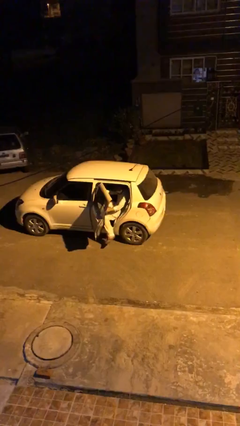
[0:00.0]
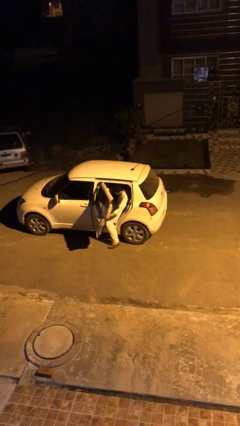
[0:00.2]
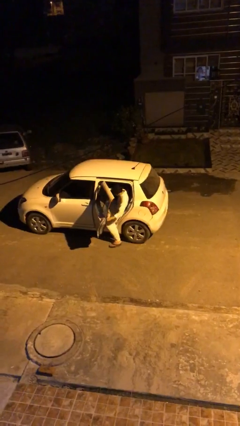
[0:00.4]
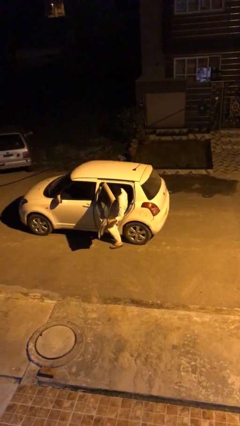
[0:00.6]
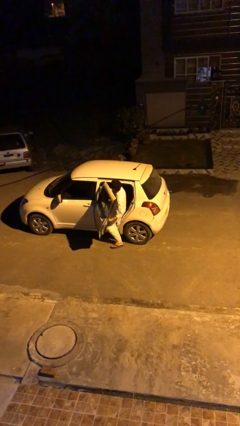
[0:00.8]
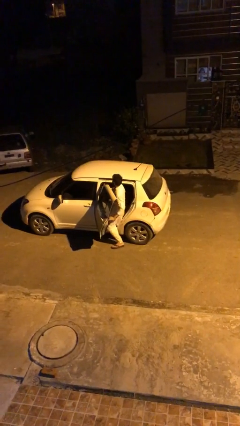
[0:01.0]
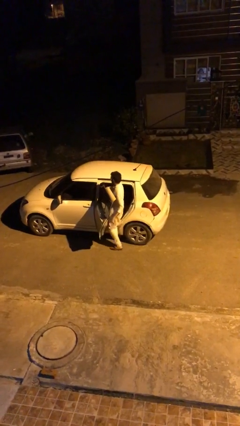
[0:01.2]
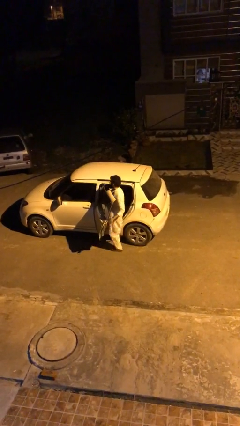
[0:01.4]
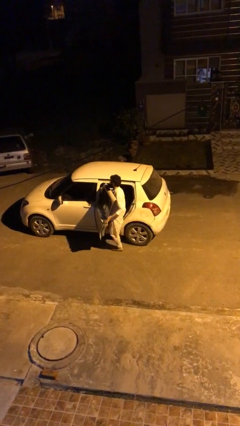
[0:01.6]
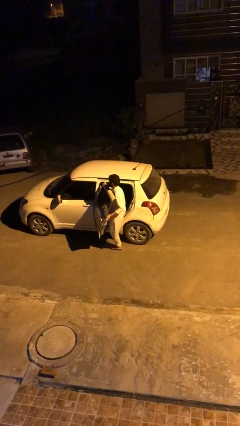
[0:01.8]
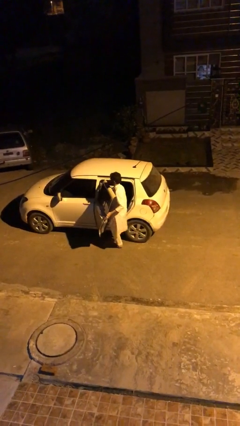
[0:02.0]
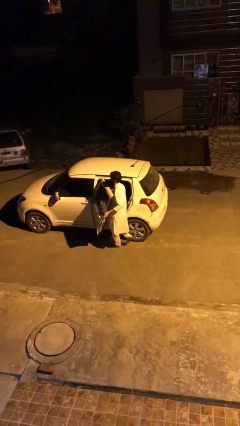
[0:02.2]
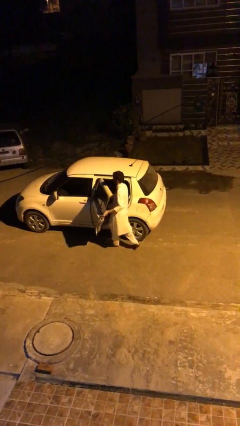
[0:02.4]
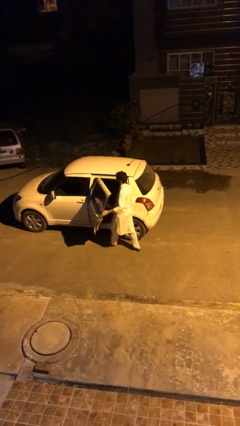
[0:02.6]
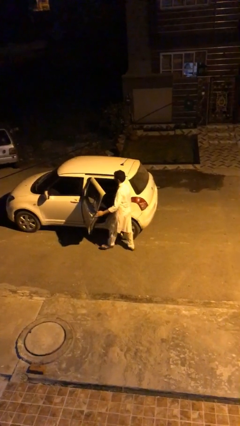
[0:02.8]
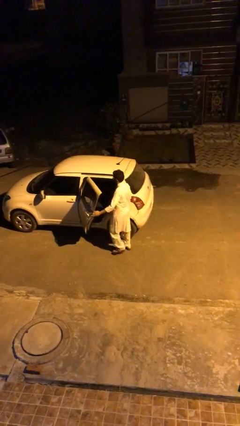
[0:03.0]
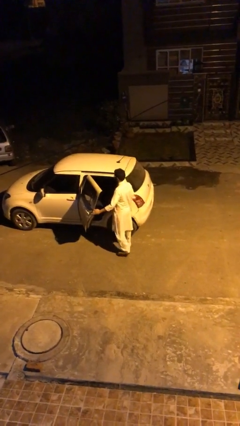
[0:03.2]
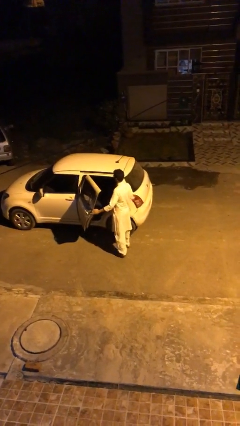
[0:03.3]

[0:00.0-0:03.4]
person exits car

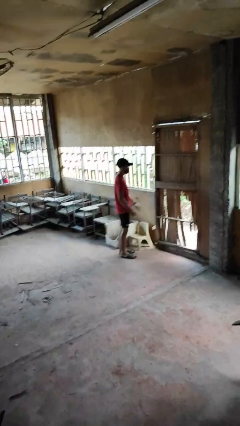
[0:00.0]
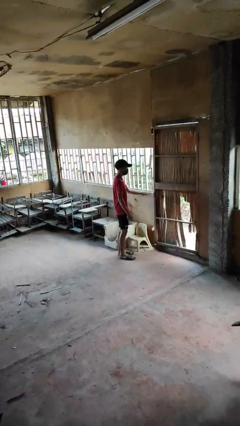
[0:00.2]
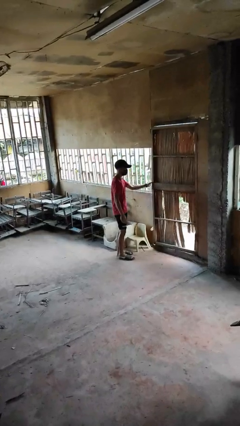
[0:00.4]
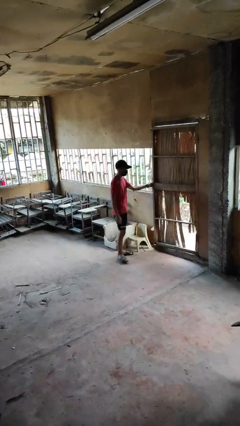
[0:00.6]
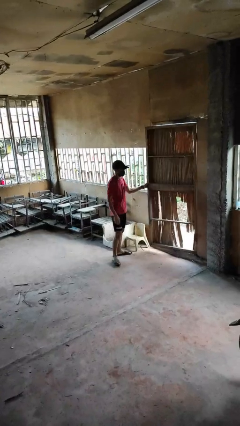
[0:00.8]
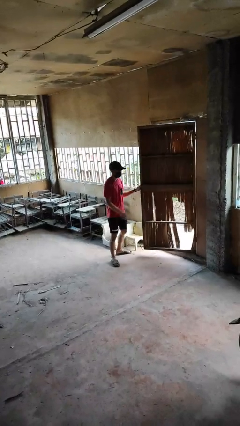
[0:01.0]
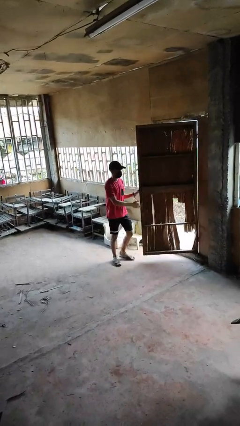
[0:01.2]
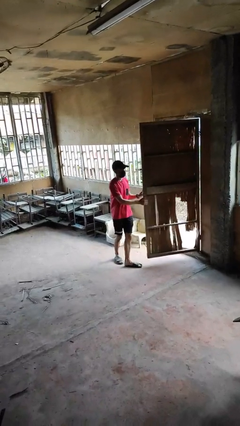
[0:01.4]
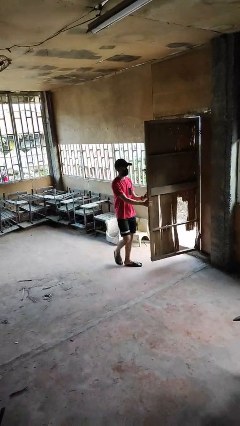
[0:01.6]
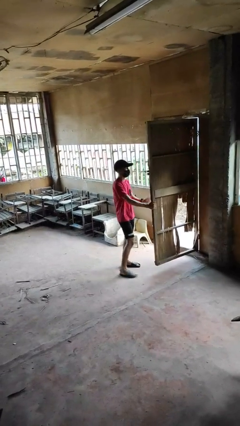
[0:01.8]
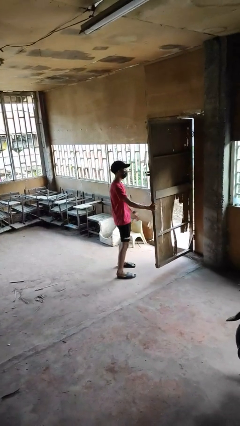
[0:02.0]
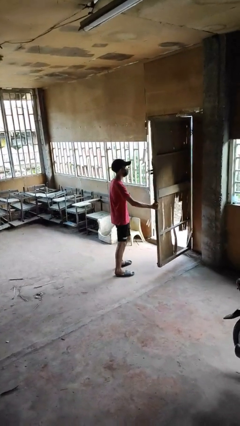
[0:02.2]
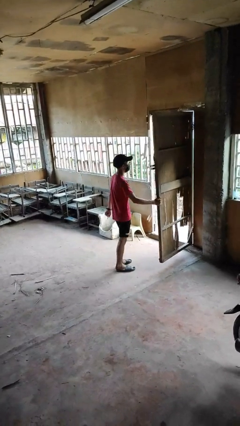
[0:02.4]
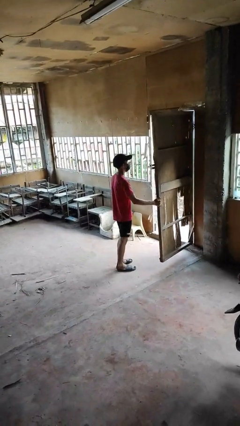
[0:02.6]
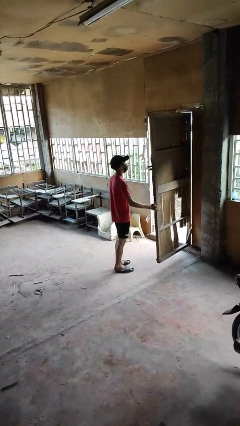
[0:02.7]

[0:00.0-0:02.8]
person opens facility door

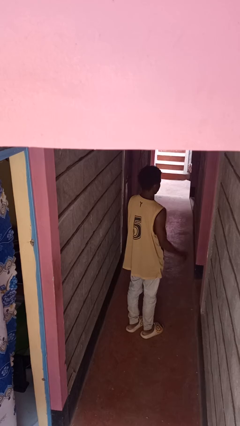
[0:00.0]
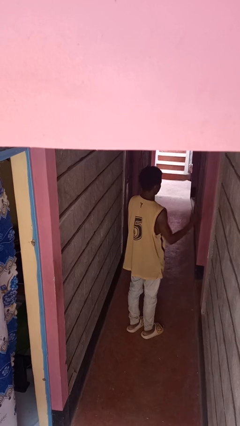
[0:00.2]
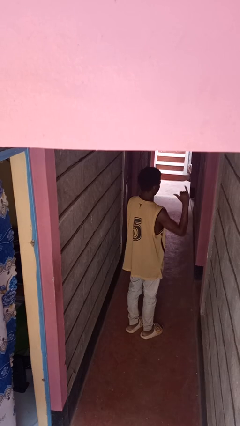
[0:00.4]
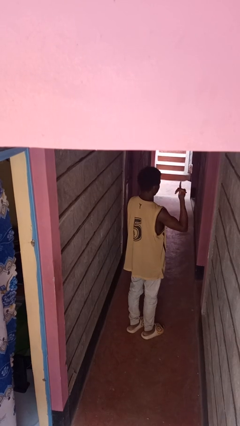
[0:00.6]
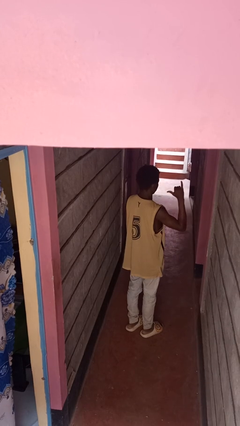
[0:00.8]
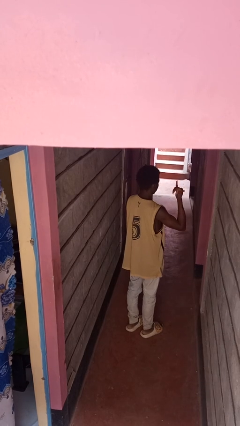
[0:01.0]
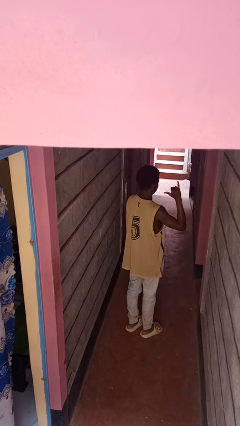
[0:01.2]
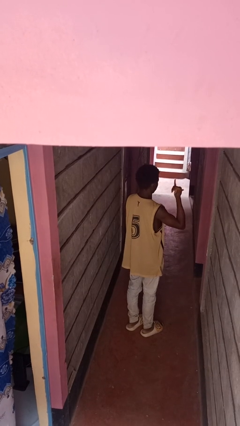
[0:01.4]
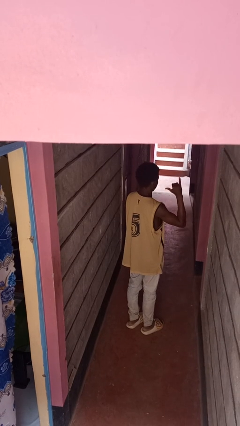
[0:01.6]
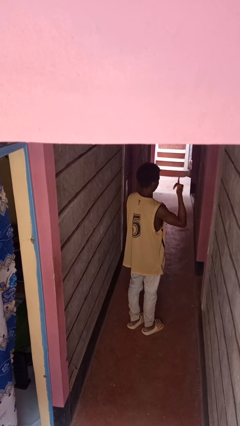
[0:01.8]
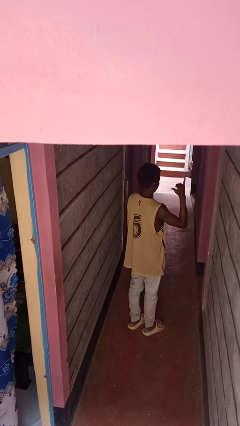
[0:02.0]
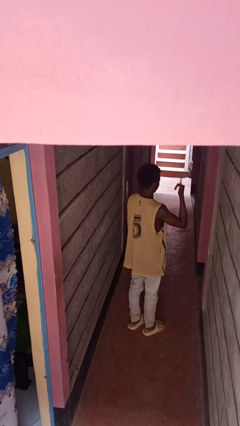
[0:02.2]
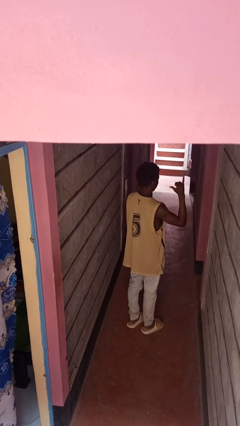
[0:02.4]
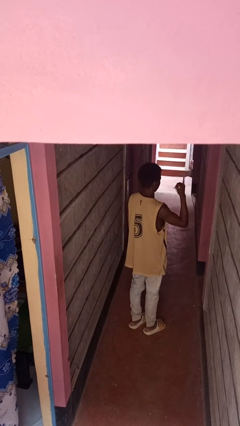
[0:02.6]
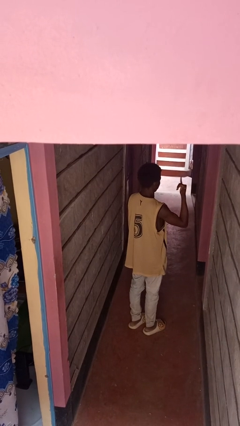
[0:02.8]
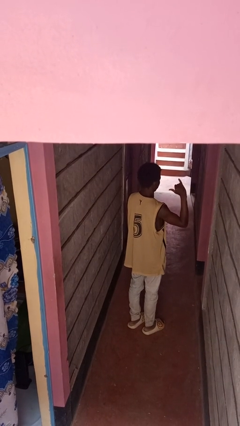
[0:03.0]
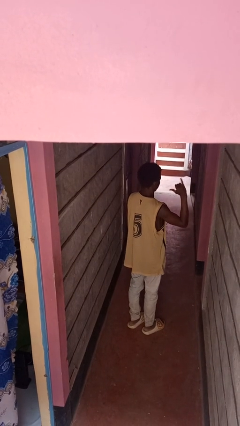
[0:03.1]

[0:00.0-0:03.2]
person gestures hang loose

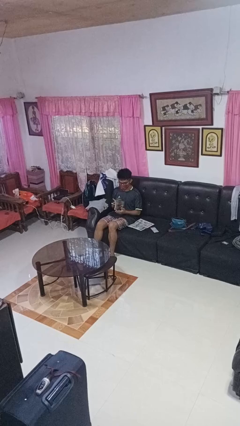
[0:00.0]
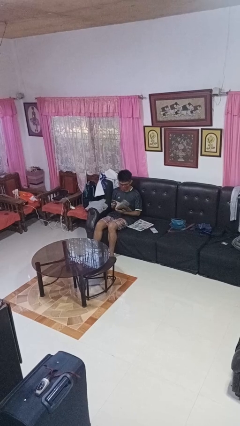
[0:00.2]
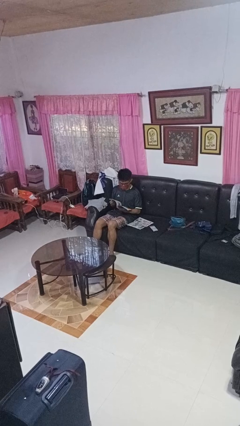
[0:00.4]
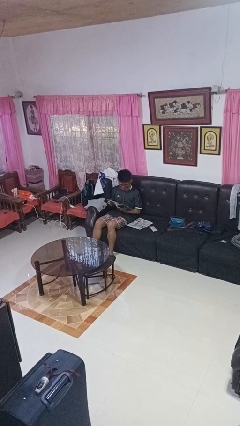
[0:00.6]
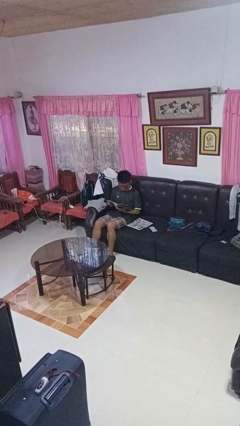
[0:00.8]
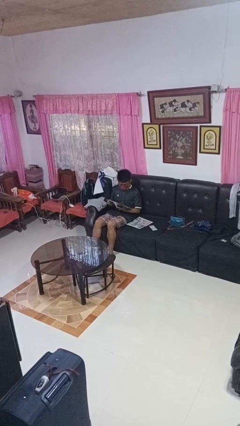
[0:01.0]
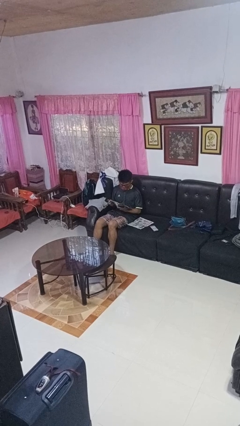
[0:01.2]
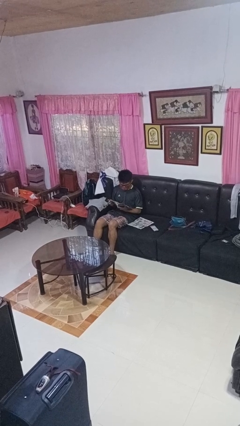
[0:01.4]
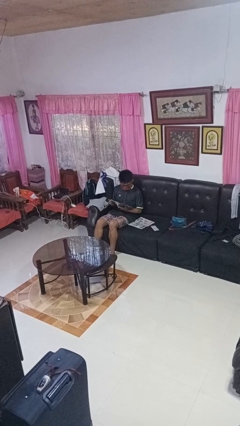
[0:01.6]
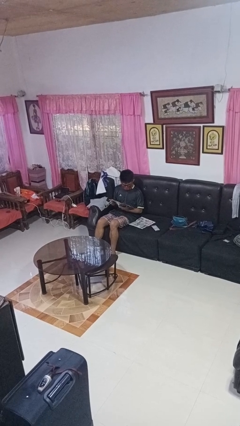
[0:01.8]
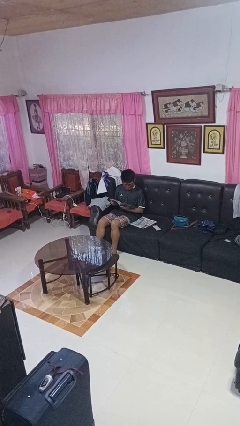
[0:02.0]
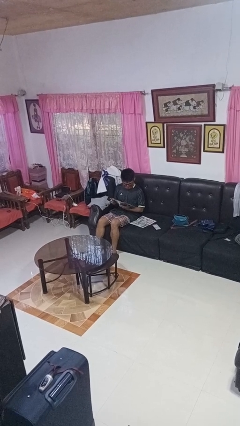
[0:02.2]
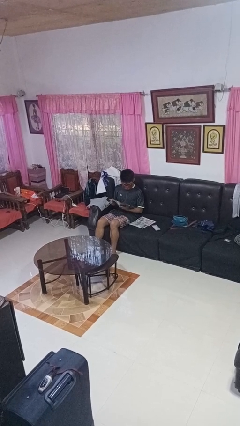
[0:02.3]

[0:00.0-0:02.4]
person reads magazine

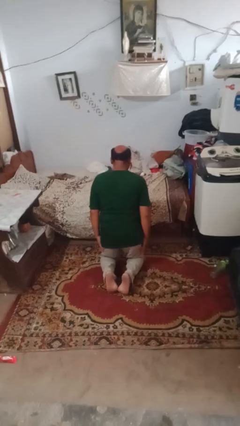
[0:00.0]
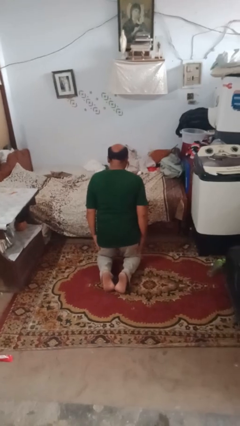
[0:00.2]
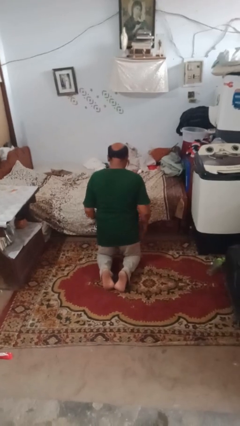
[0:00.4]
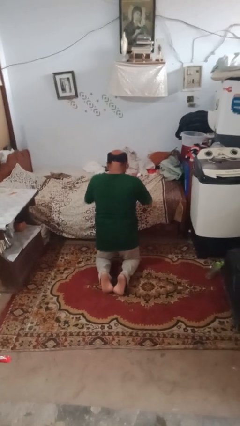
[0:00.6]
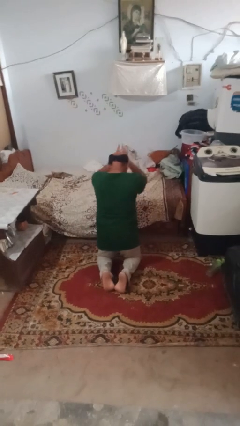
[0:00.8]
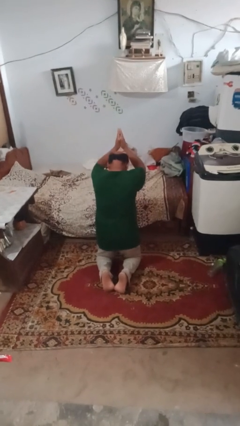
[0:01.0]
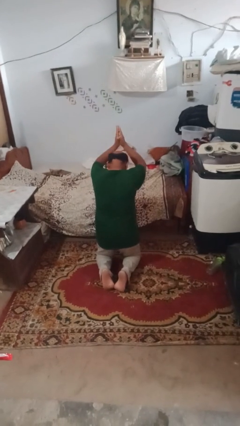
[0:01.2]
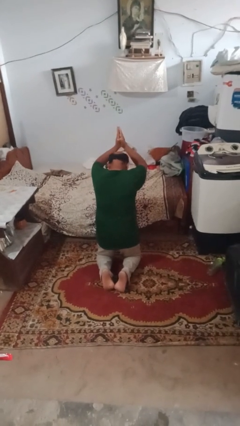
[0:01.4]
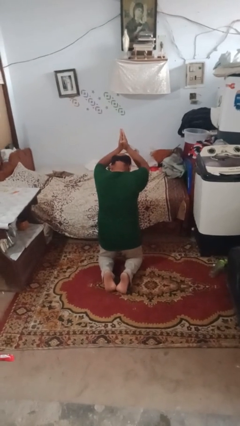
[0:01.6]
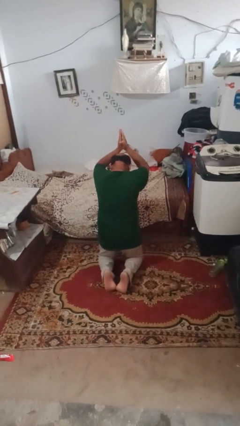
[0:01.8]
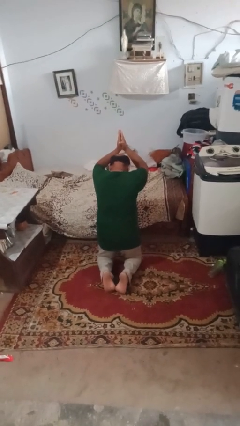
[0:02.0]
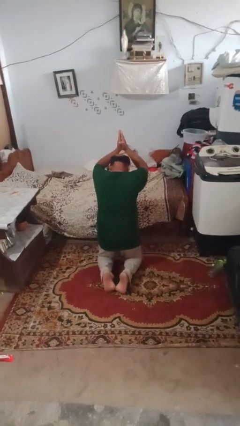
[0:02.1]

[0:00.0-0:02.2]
person prays

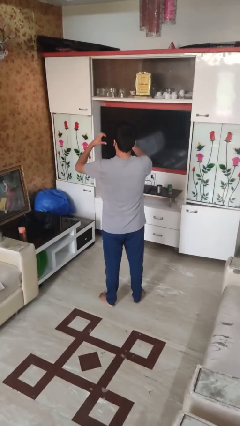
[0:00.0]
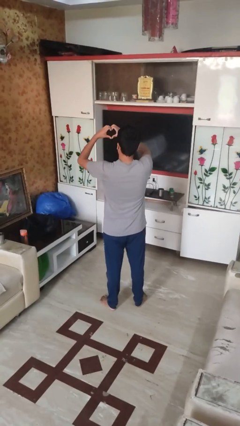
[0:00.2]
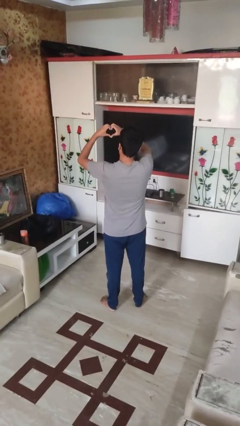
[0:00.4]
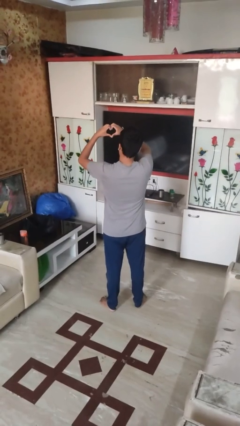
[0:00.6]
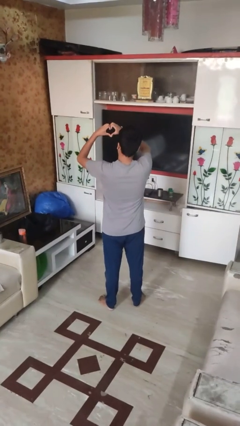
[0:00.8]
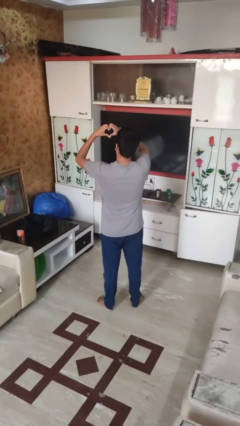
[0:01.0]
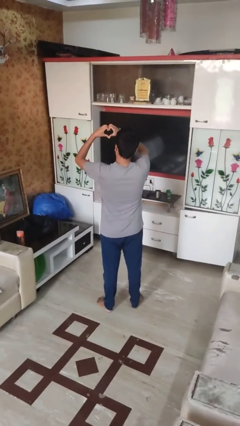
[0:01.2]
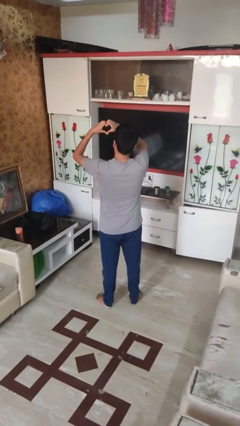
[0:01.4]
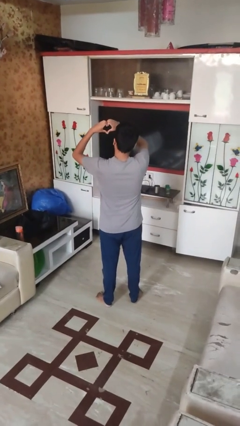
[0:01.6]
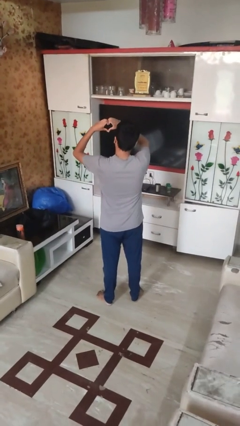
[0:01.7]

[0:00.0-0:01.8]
person gestures heart

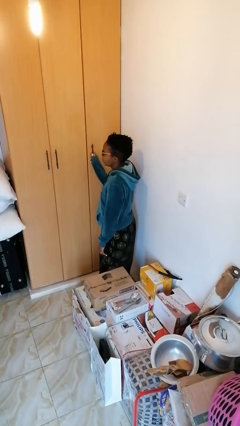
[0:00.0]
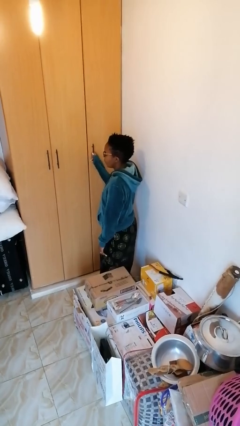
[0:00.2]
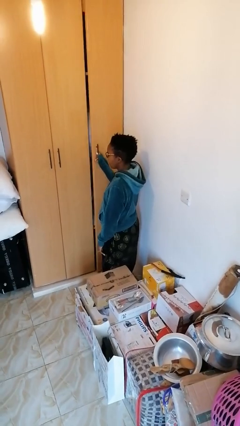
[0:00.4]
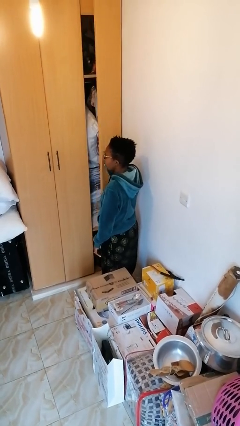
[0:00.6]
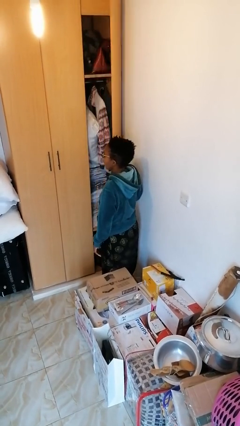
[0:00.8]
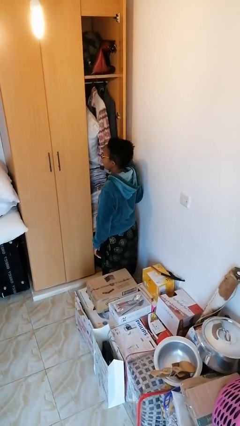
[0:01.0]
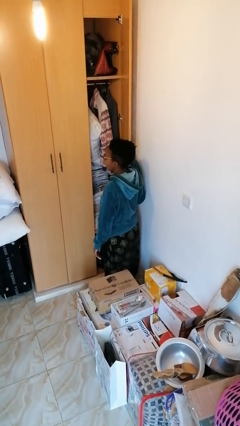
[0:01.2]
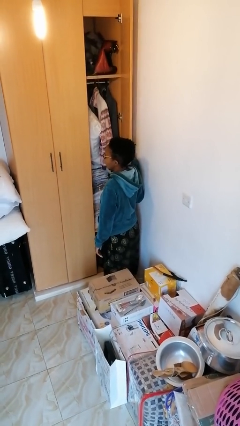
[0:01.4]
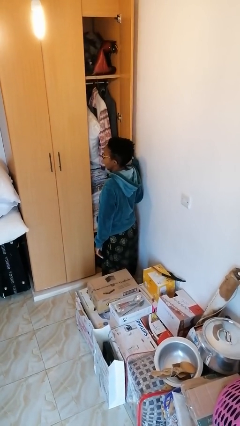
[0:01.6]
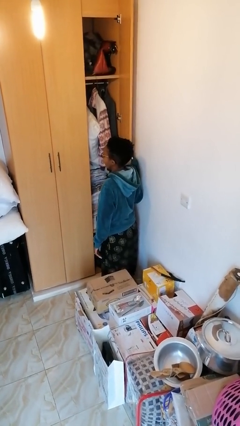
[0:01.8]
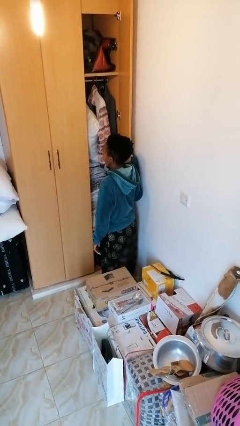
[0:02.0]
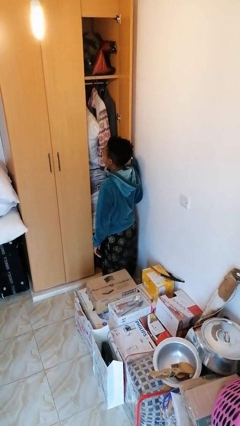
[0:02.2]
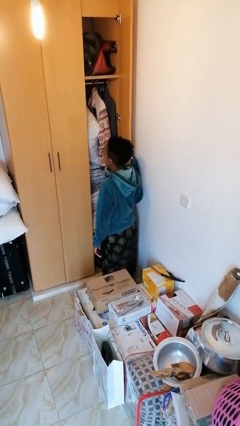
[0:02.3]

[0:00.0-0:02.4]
person opens closet door
